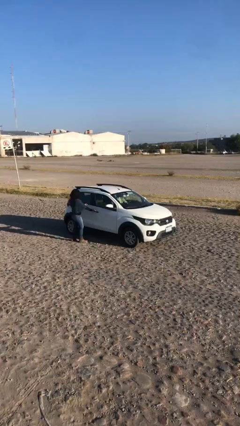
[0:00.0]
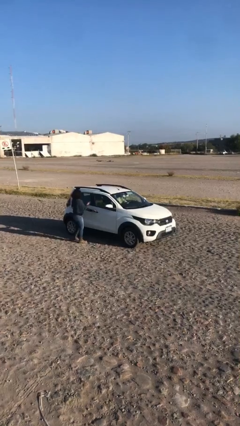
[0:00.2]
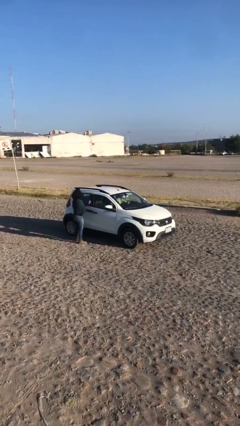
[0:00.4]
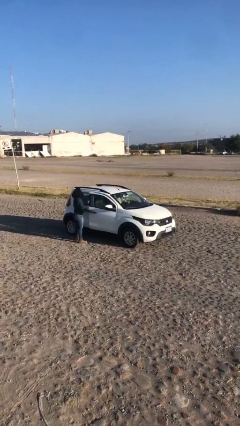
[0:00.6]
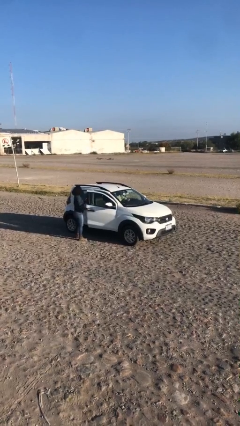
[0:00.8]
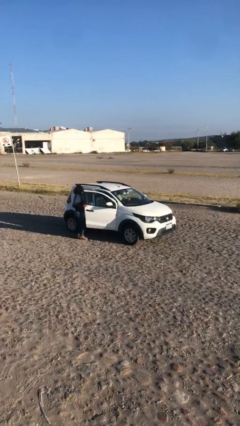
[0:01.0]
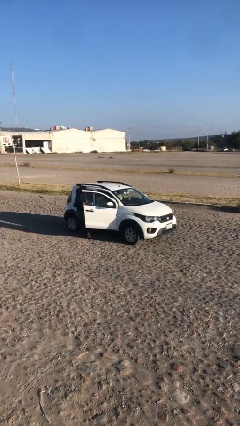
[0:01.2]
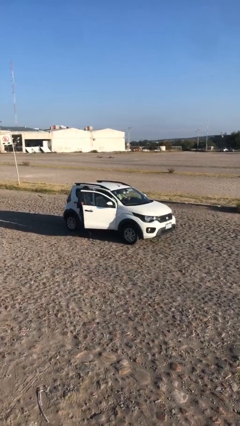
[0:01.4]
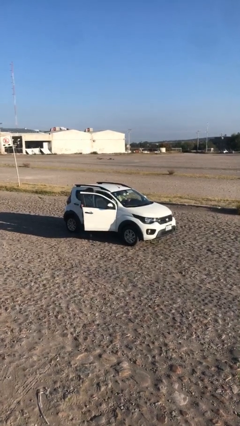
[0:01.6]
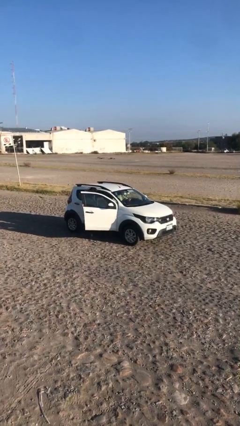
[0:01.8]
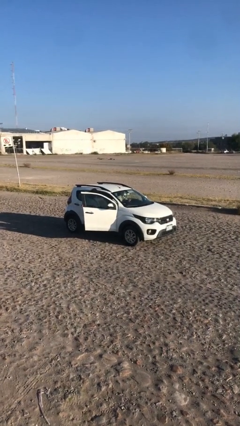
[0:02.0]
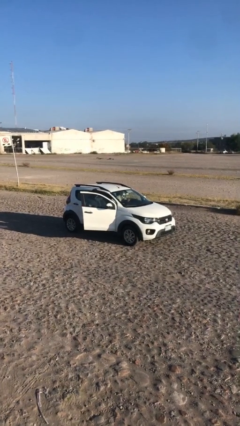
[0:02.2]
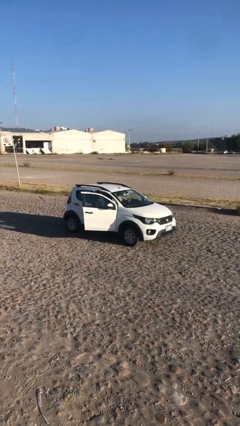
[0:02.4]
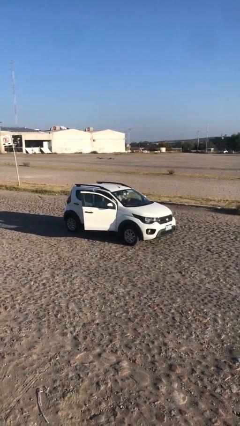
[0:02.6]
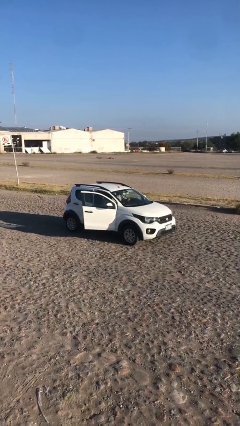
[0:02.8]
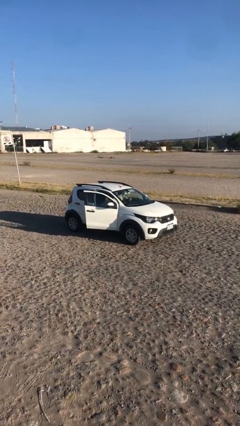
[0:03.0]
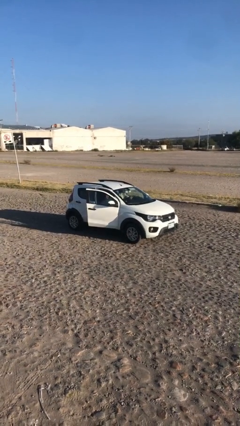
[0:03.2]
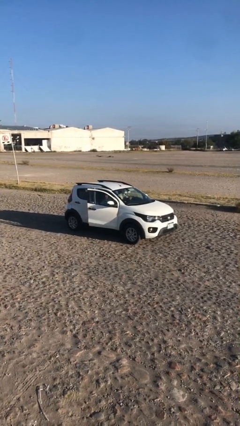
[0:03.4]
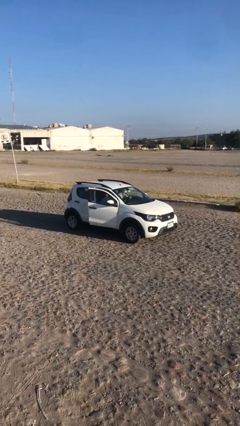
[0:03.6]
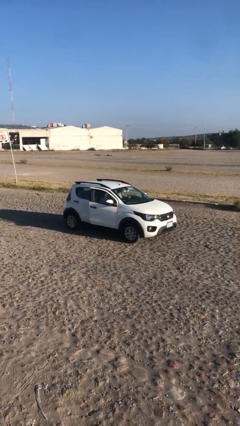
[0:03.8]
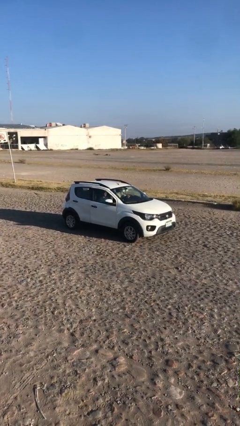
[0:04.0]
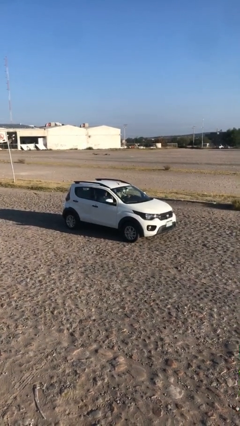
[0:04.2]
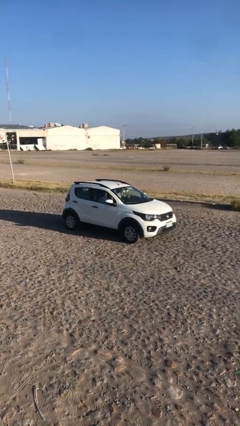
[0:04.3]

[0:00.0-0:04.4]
car picks up person

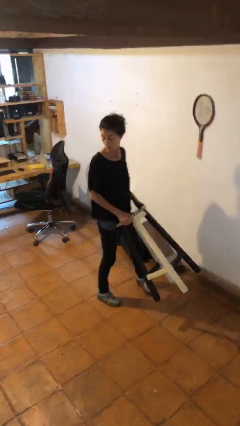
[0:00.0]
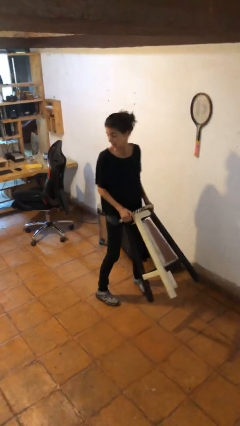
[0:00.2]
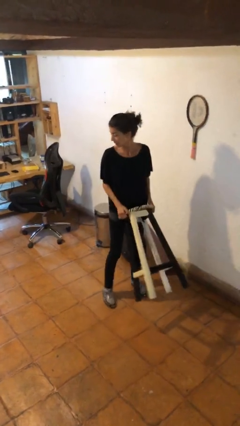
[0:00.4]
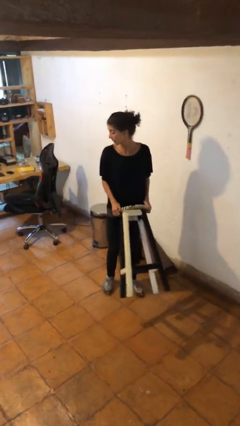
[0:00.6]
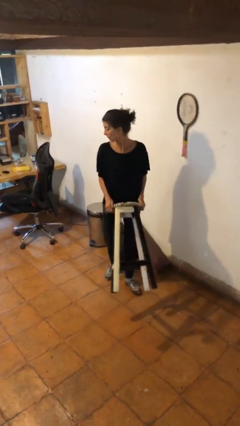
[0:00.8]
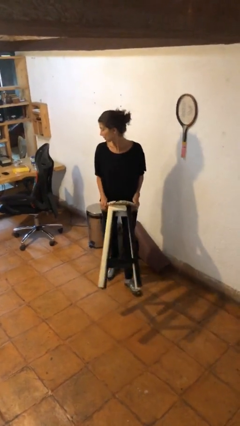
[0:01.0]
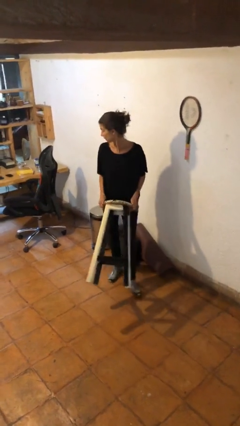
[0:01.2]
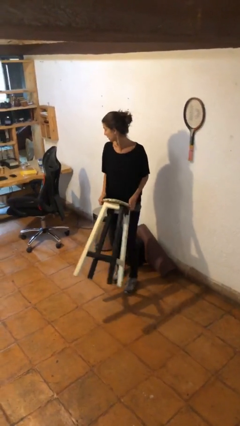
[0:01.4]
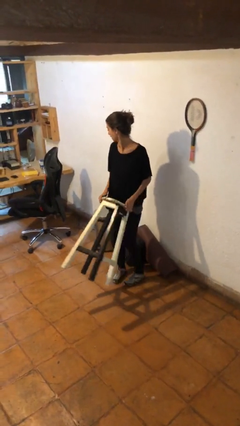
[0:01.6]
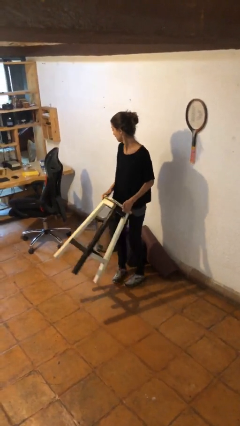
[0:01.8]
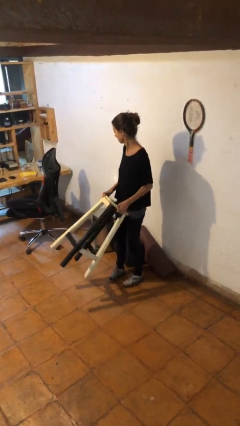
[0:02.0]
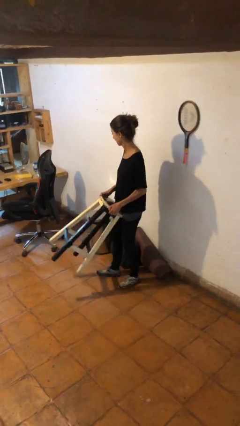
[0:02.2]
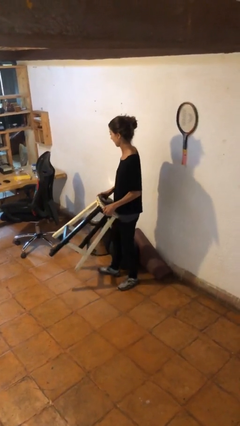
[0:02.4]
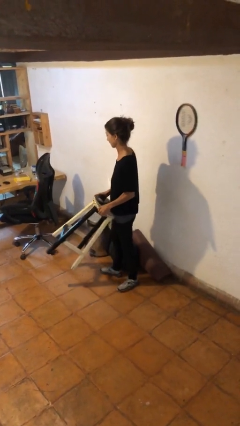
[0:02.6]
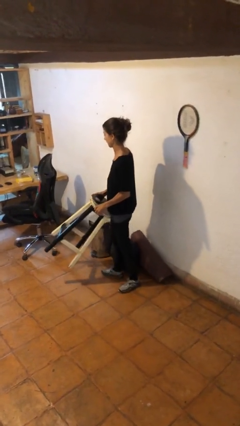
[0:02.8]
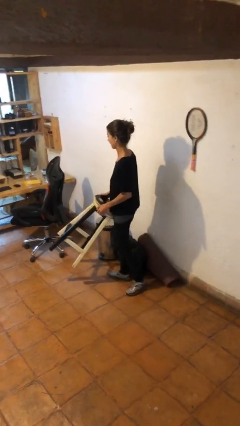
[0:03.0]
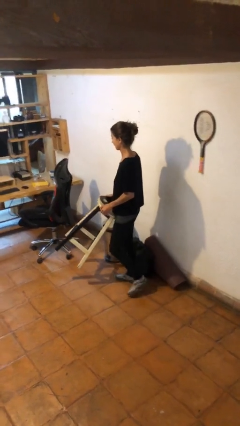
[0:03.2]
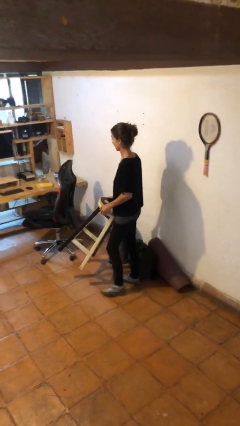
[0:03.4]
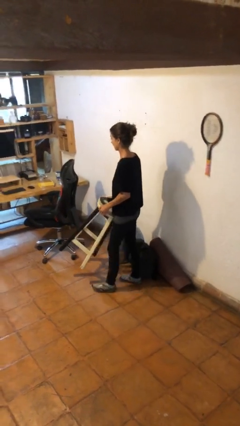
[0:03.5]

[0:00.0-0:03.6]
person carries furniture

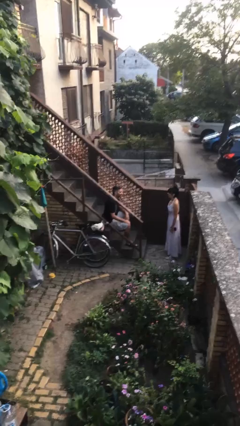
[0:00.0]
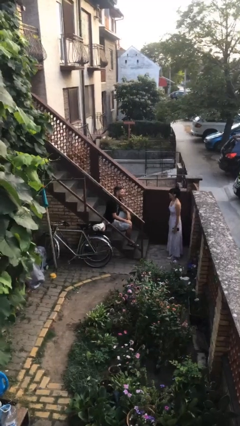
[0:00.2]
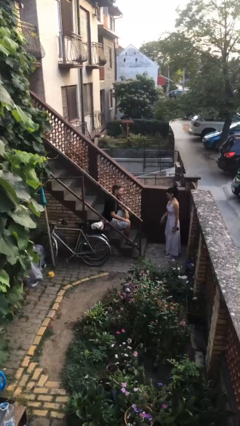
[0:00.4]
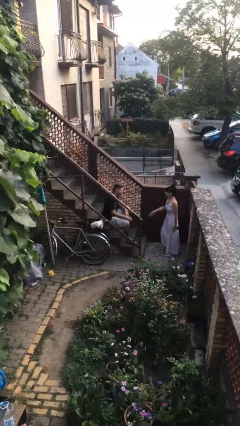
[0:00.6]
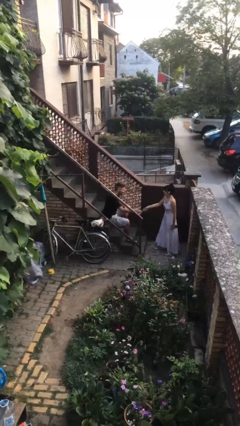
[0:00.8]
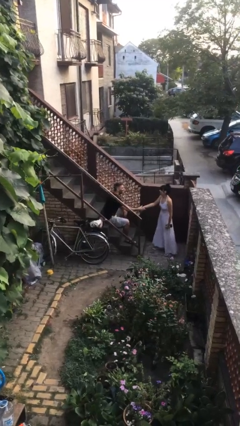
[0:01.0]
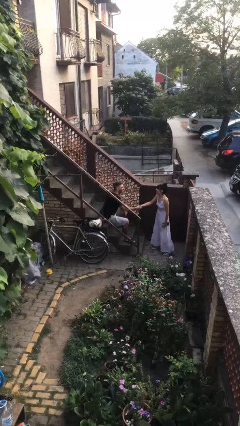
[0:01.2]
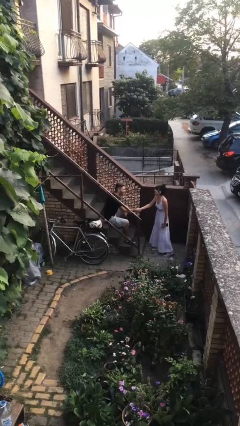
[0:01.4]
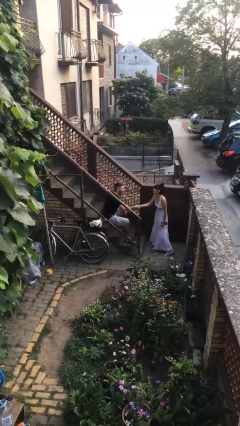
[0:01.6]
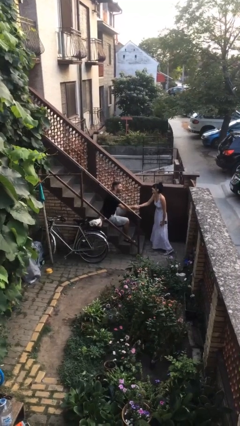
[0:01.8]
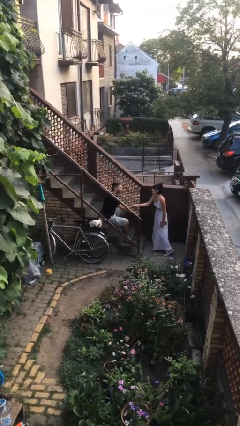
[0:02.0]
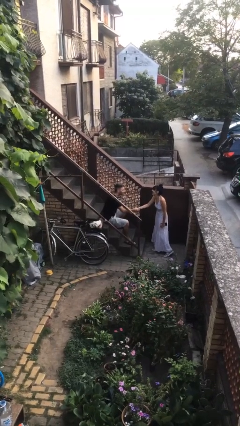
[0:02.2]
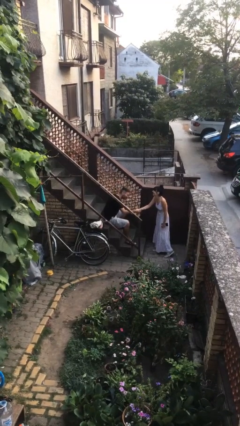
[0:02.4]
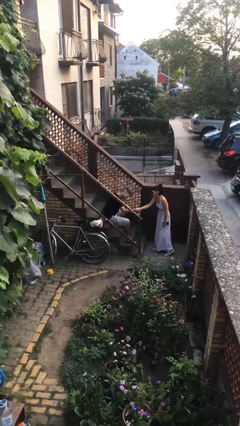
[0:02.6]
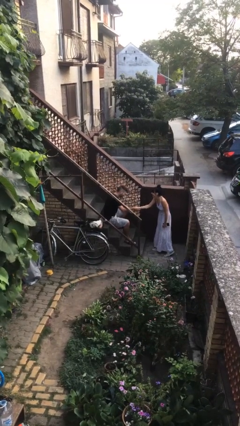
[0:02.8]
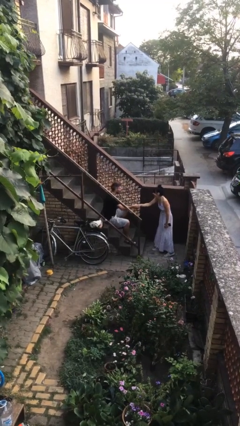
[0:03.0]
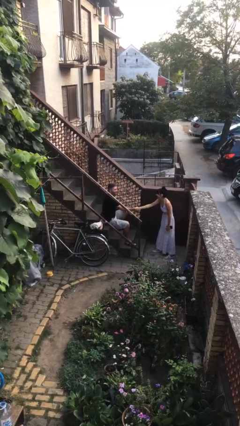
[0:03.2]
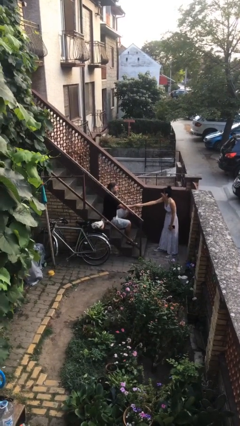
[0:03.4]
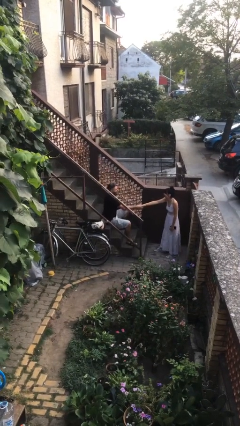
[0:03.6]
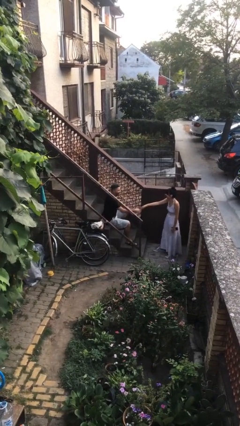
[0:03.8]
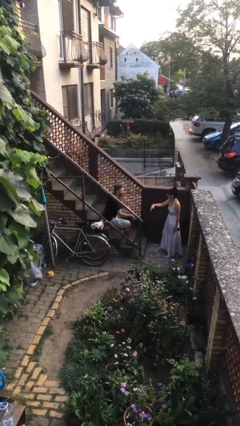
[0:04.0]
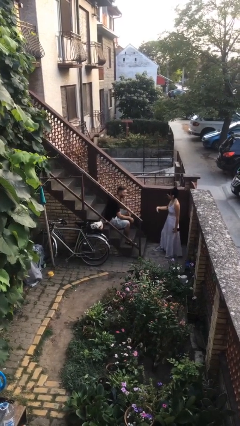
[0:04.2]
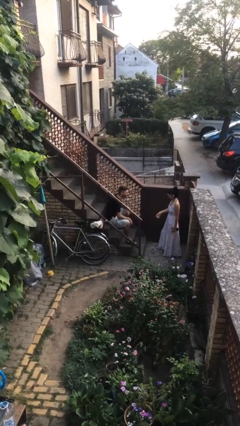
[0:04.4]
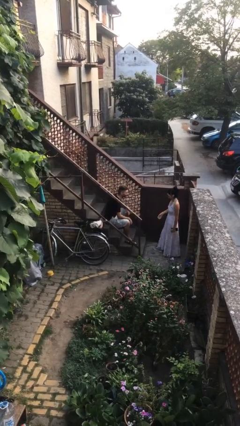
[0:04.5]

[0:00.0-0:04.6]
person shakes hand

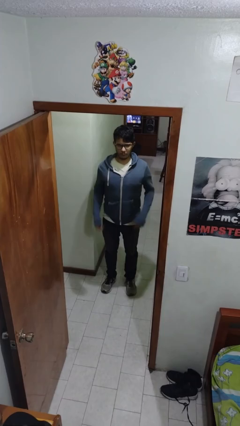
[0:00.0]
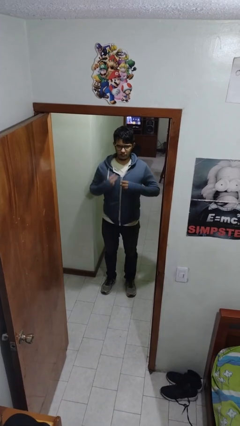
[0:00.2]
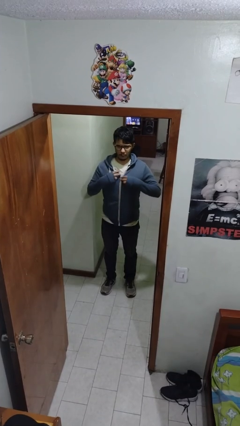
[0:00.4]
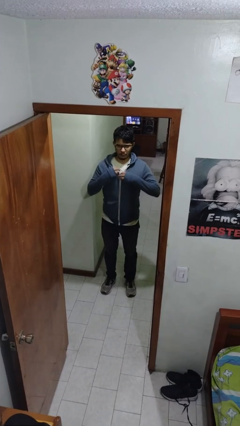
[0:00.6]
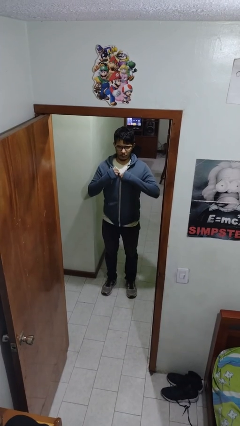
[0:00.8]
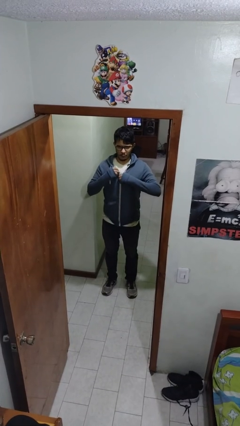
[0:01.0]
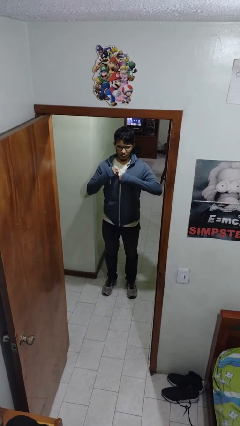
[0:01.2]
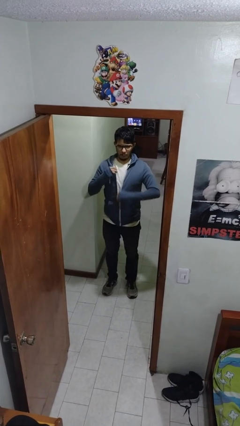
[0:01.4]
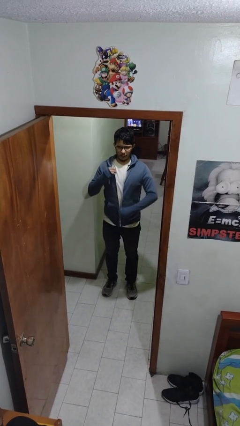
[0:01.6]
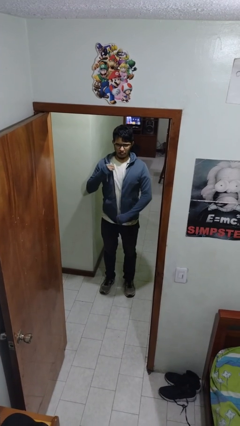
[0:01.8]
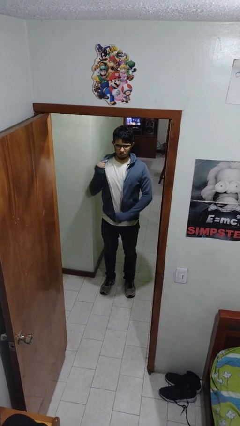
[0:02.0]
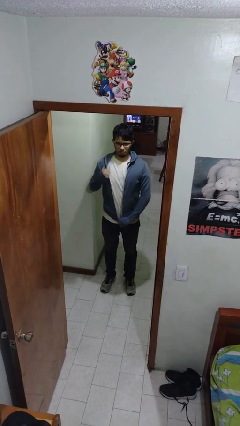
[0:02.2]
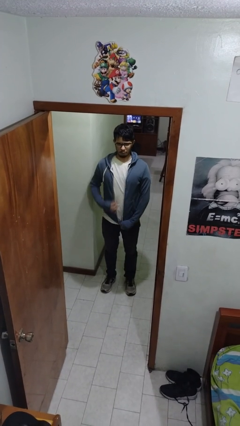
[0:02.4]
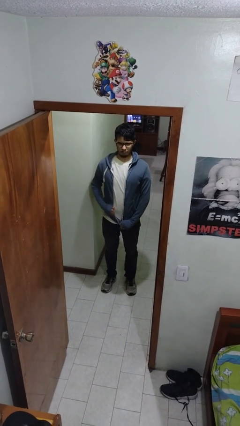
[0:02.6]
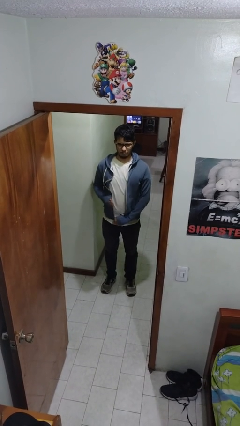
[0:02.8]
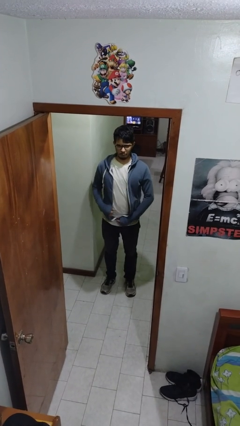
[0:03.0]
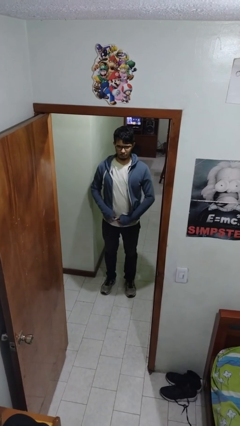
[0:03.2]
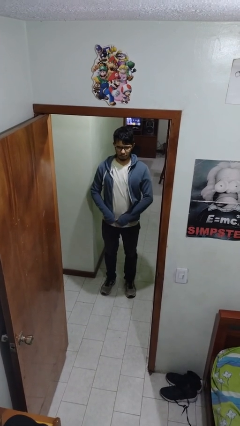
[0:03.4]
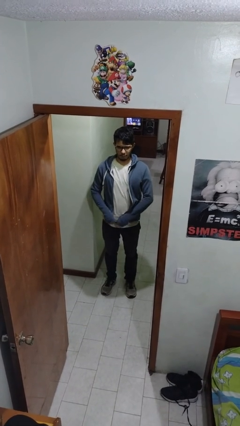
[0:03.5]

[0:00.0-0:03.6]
person unzips jacket

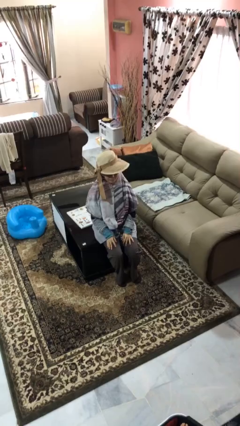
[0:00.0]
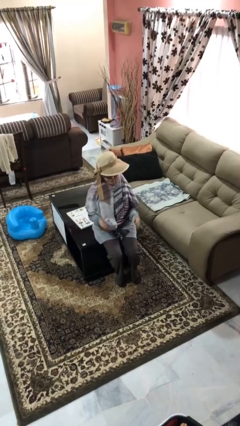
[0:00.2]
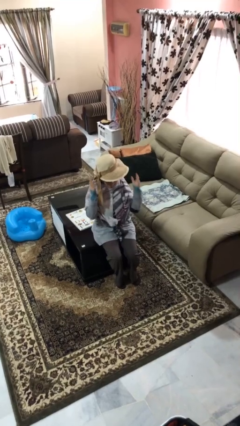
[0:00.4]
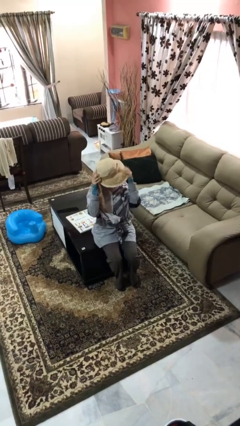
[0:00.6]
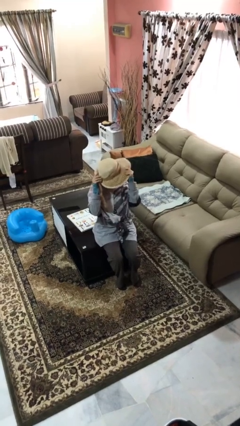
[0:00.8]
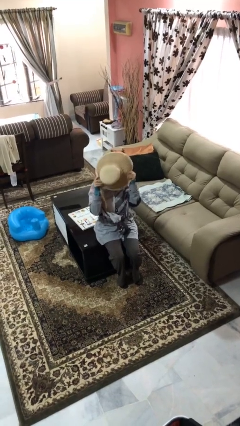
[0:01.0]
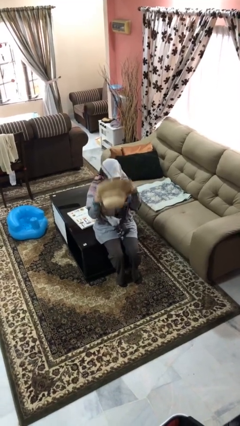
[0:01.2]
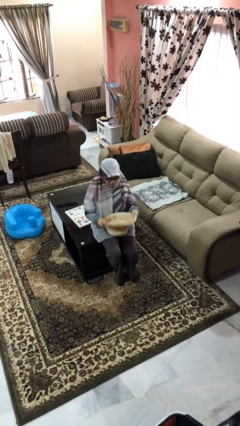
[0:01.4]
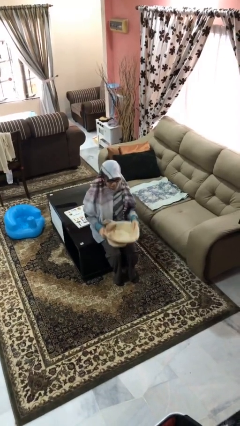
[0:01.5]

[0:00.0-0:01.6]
person takes off hat
